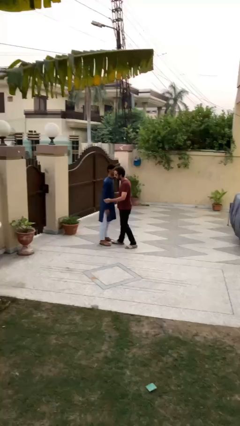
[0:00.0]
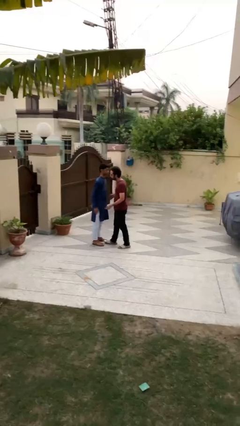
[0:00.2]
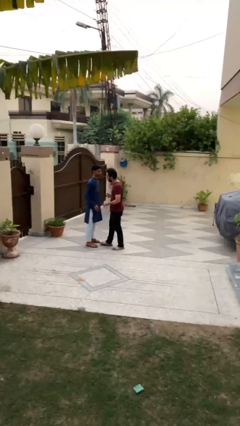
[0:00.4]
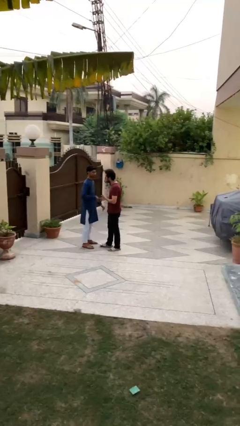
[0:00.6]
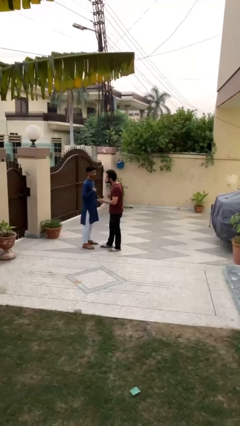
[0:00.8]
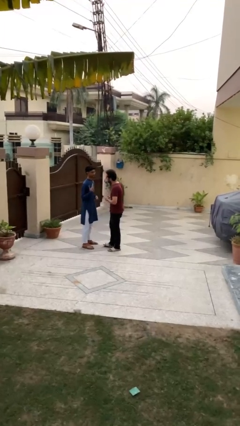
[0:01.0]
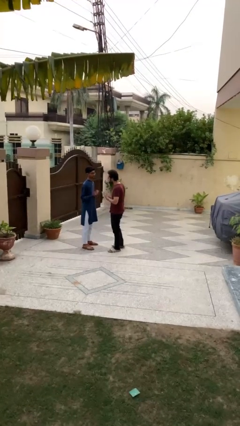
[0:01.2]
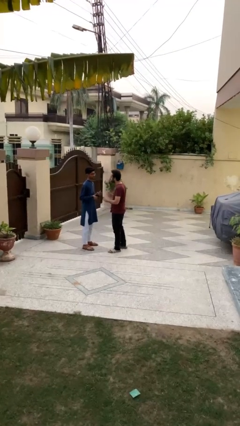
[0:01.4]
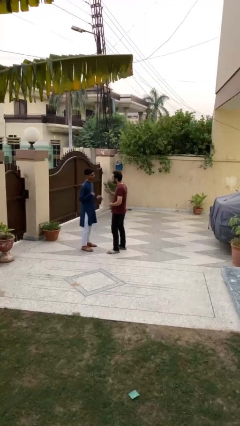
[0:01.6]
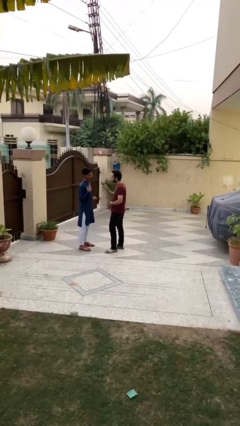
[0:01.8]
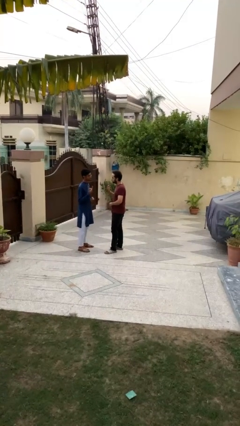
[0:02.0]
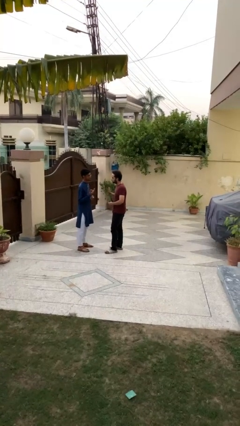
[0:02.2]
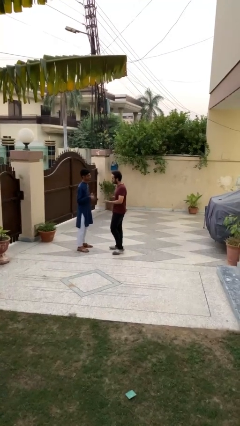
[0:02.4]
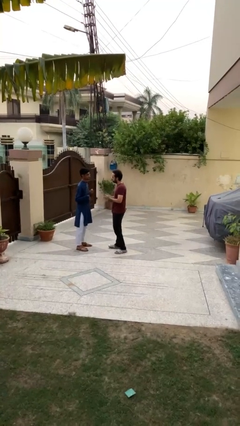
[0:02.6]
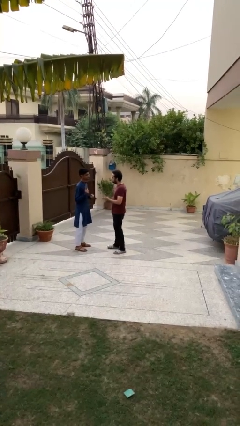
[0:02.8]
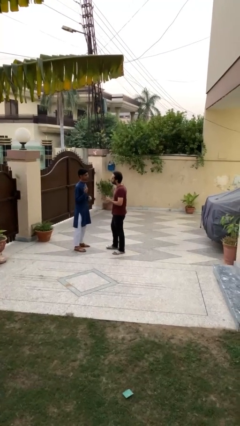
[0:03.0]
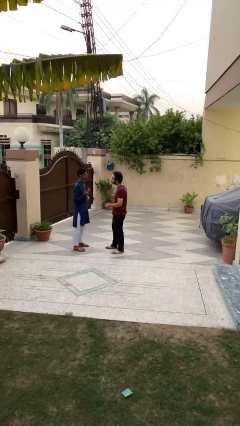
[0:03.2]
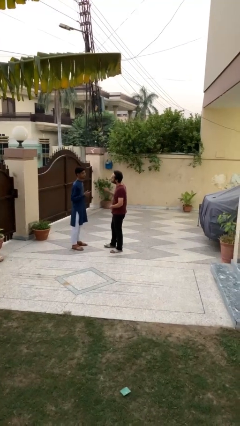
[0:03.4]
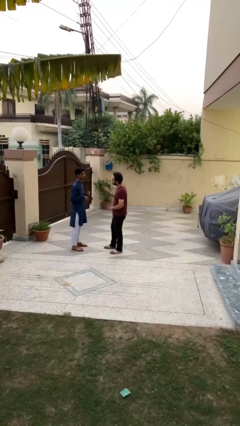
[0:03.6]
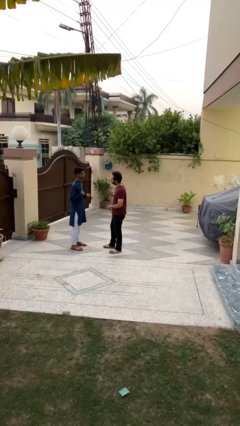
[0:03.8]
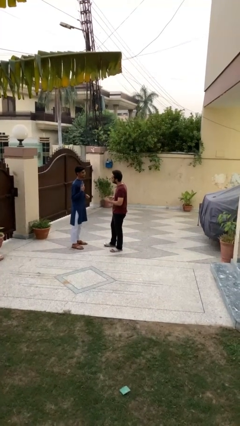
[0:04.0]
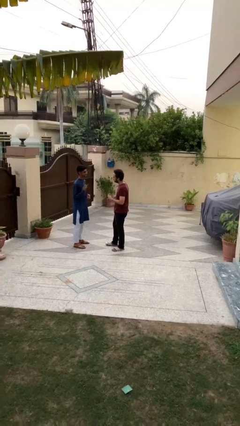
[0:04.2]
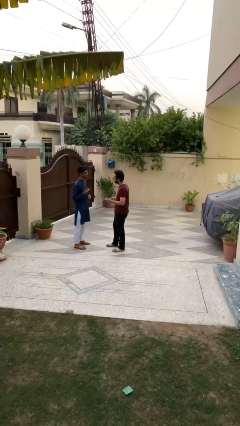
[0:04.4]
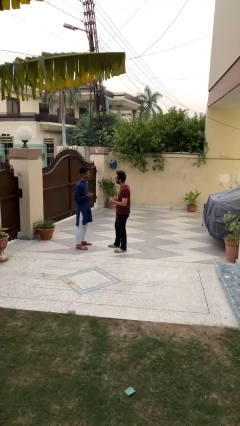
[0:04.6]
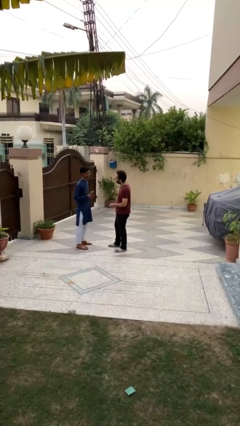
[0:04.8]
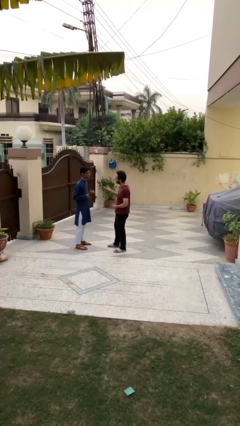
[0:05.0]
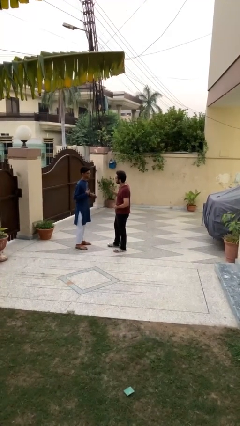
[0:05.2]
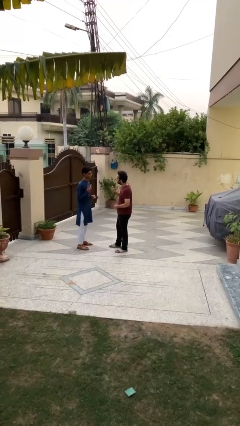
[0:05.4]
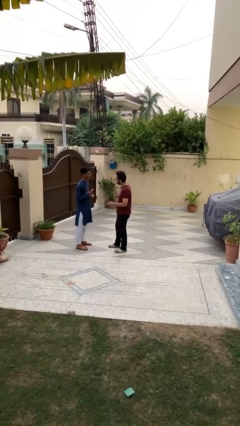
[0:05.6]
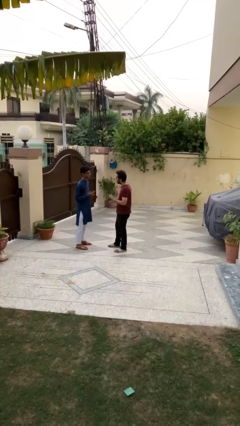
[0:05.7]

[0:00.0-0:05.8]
person talks to person

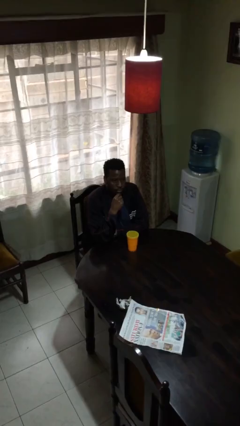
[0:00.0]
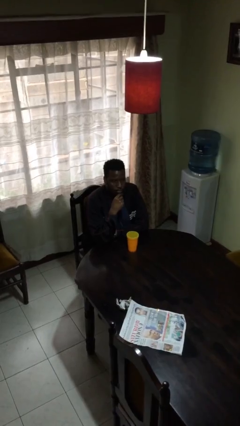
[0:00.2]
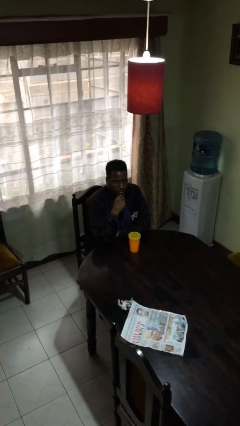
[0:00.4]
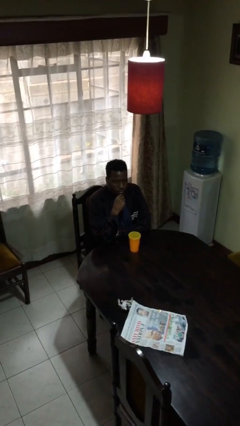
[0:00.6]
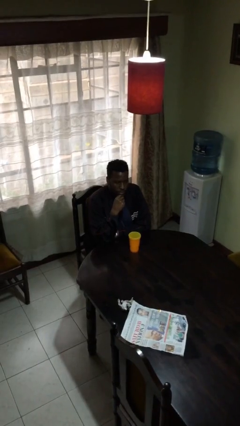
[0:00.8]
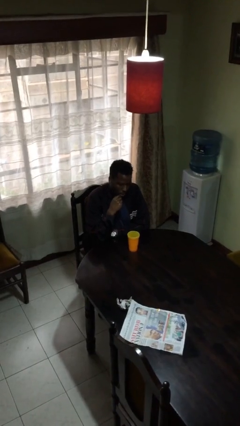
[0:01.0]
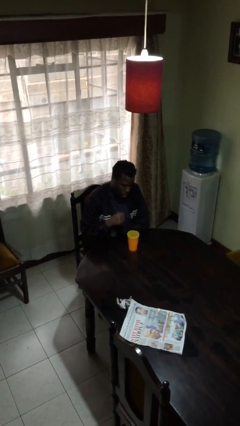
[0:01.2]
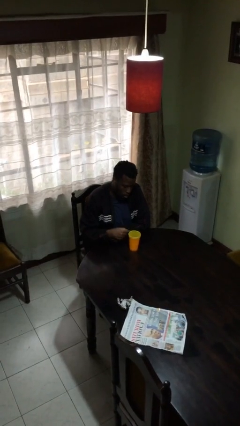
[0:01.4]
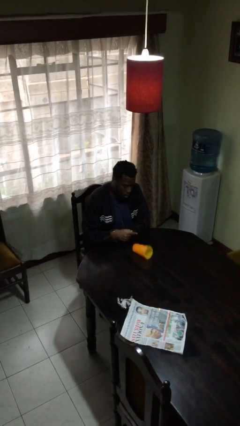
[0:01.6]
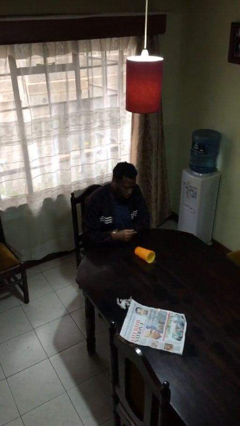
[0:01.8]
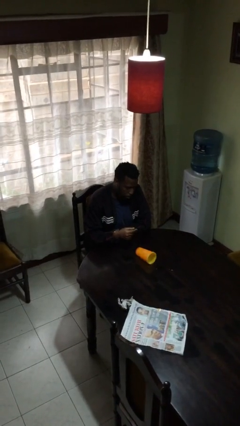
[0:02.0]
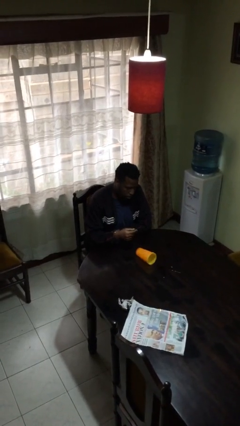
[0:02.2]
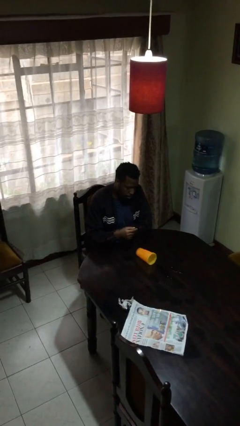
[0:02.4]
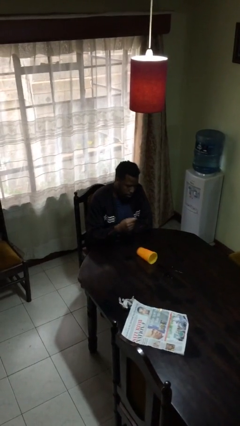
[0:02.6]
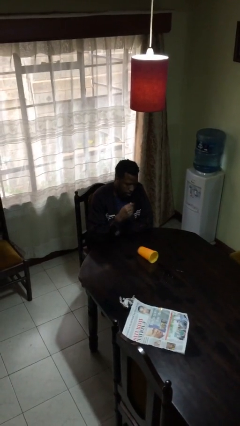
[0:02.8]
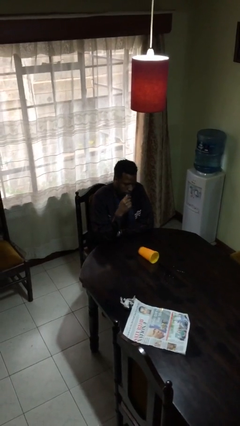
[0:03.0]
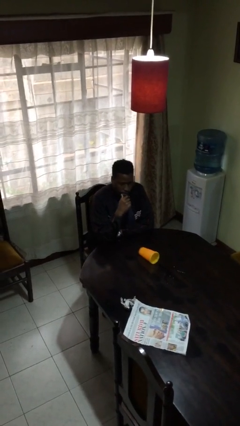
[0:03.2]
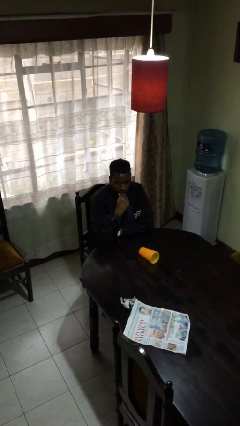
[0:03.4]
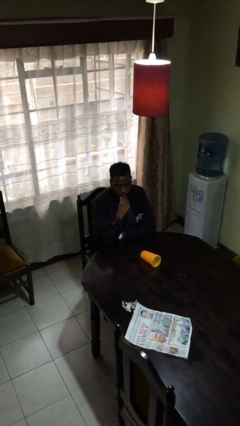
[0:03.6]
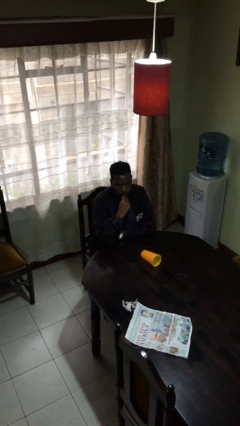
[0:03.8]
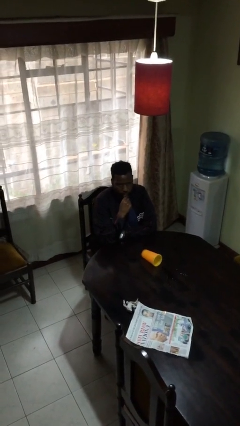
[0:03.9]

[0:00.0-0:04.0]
person spills on table

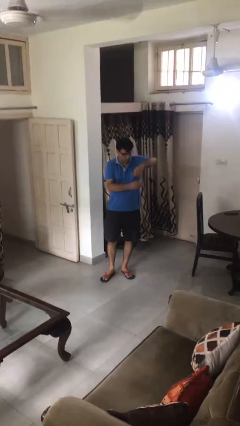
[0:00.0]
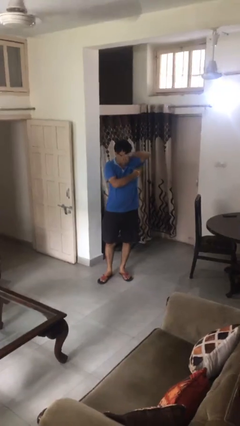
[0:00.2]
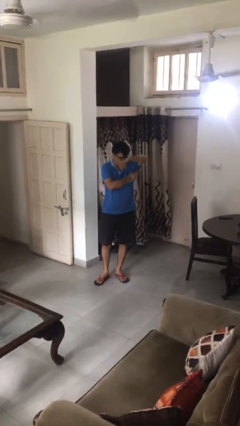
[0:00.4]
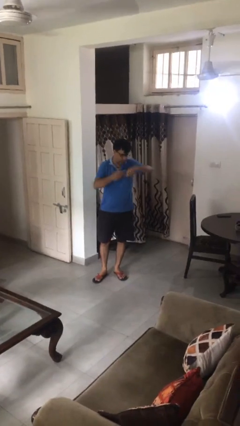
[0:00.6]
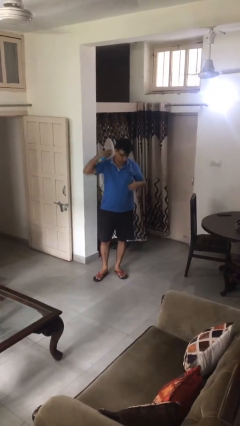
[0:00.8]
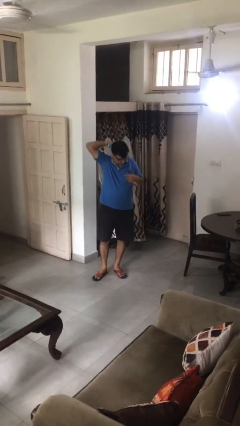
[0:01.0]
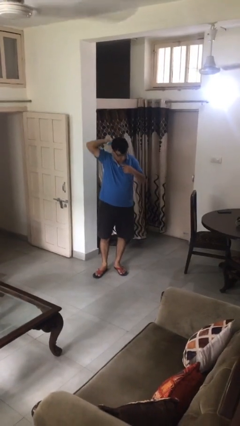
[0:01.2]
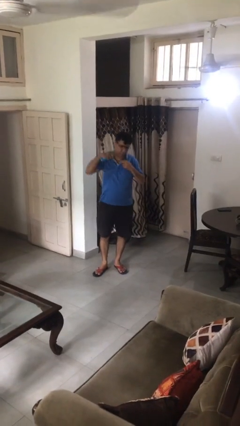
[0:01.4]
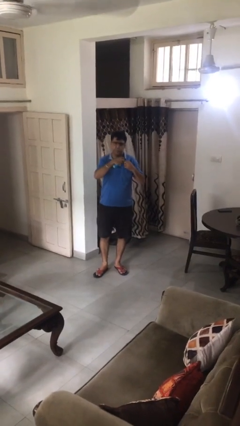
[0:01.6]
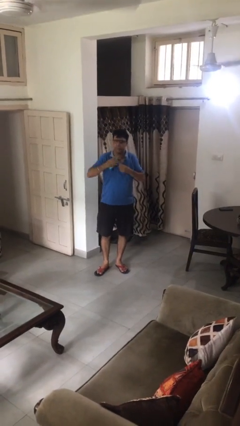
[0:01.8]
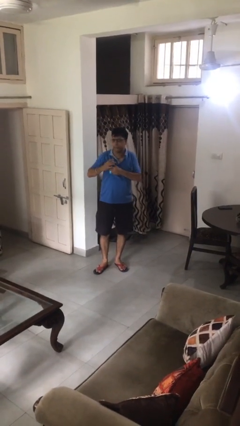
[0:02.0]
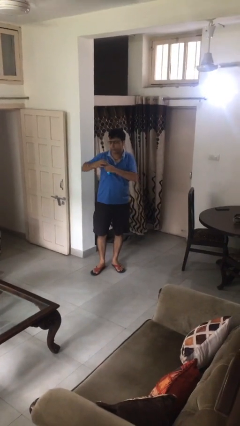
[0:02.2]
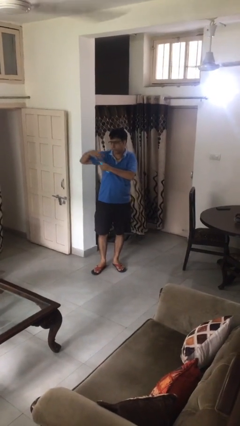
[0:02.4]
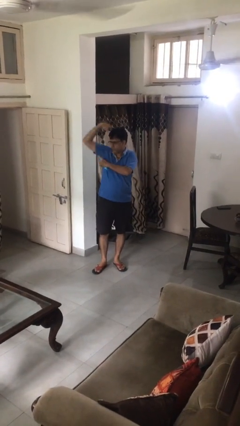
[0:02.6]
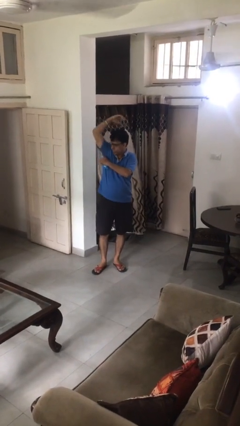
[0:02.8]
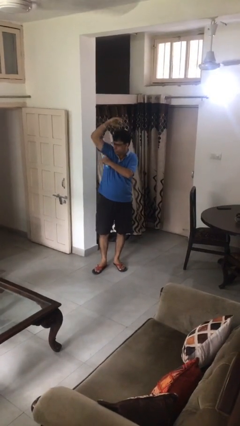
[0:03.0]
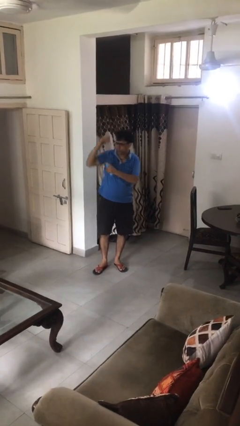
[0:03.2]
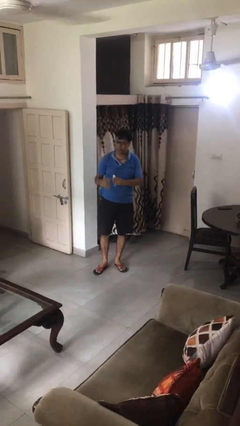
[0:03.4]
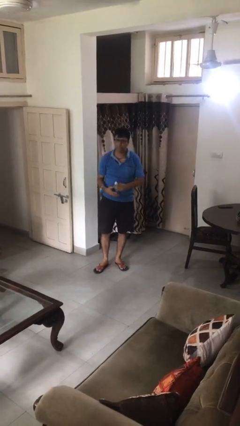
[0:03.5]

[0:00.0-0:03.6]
person applies deodorant

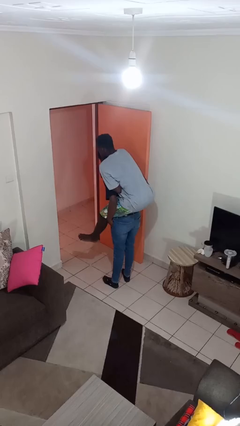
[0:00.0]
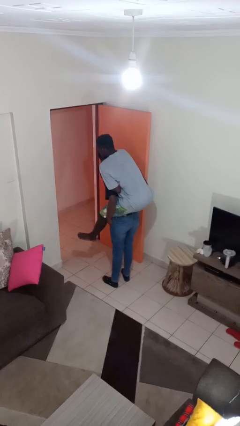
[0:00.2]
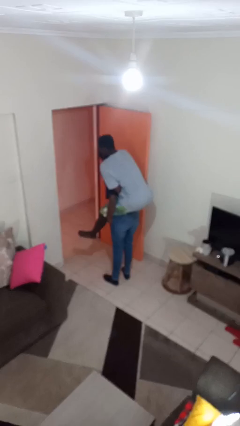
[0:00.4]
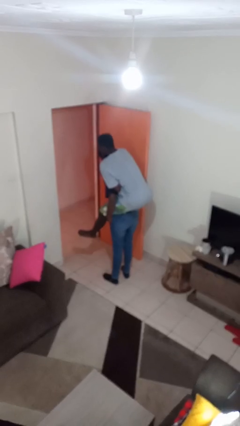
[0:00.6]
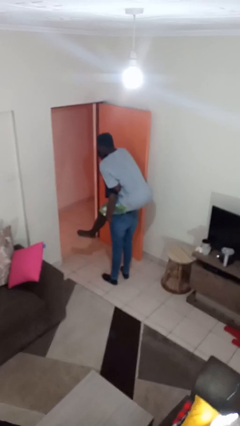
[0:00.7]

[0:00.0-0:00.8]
person carries person on back

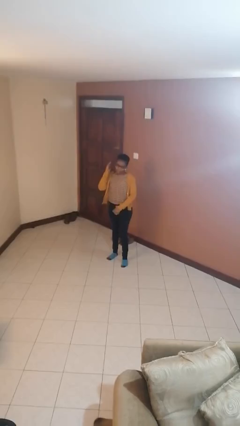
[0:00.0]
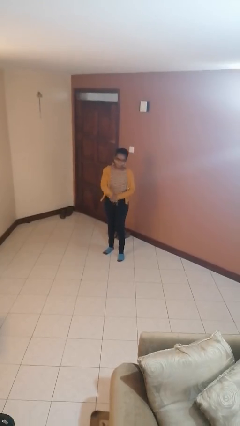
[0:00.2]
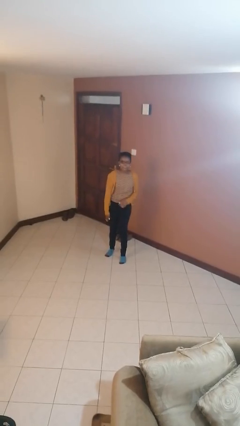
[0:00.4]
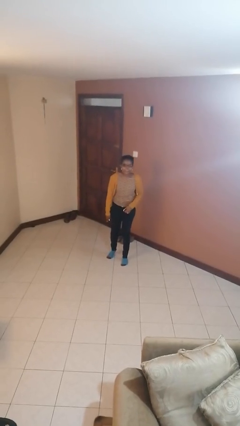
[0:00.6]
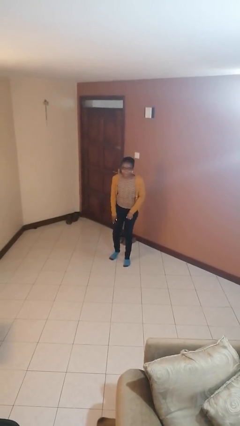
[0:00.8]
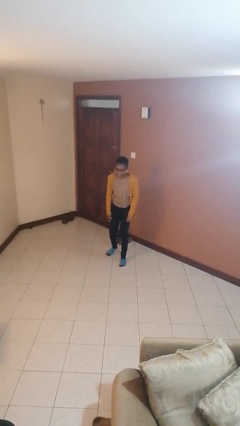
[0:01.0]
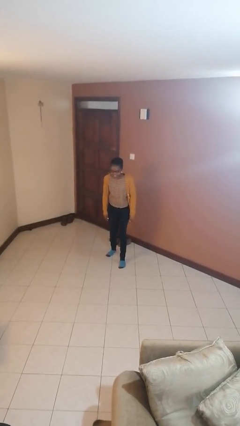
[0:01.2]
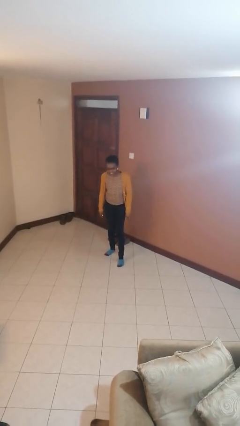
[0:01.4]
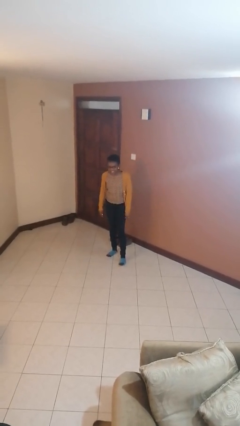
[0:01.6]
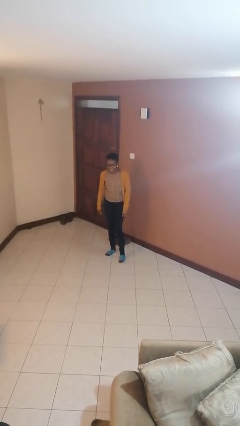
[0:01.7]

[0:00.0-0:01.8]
person karate chop

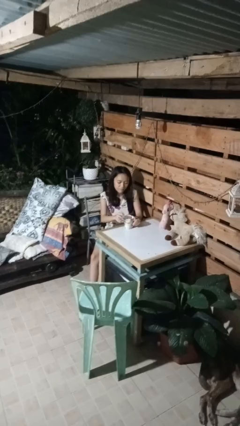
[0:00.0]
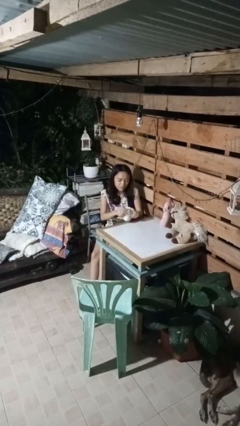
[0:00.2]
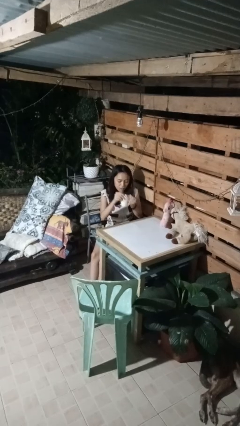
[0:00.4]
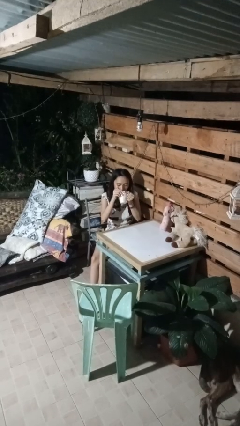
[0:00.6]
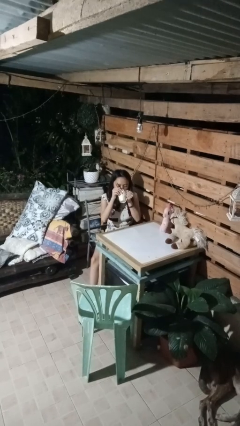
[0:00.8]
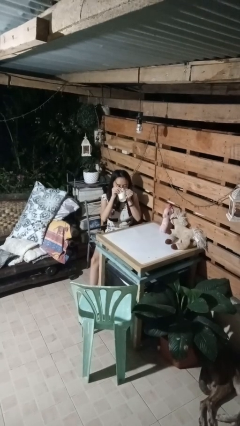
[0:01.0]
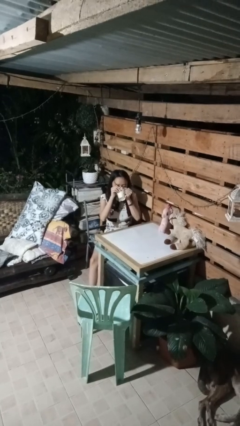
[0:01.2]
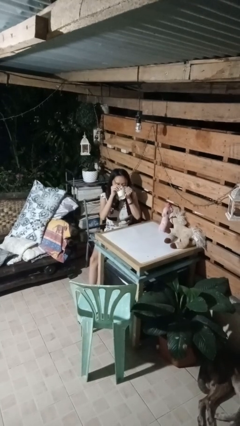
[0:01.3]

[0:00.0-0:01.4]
person drinks from mug
